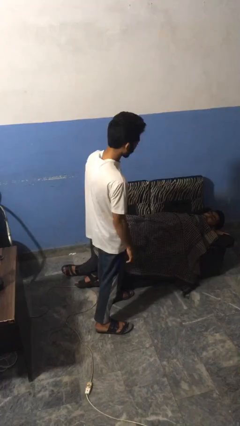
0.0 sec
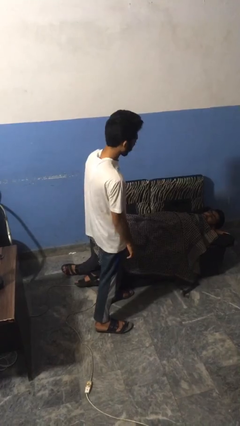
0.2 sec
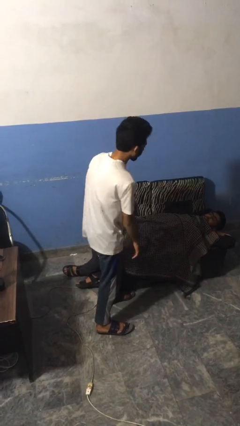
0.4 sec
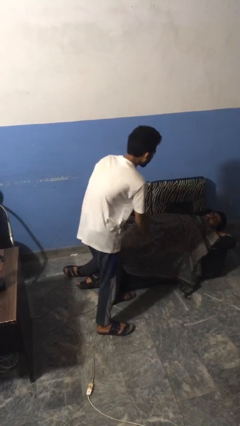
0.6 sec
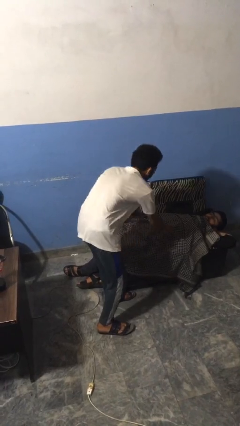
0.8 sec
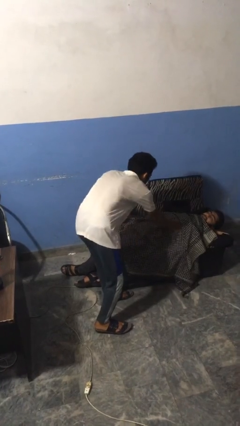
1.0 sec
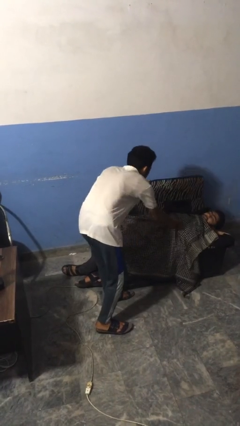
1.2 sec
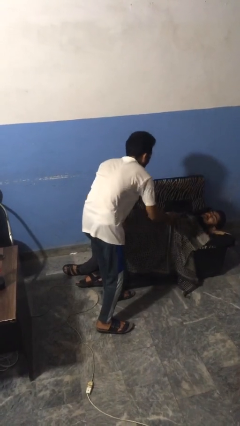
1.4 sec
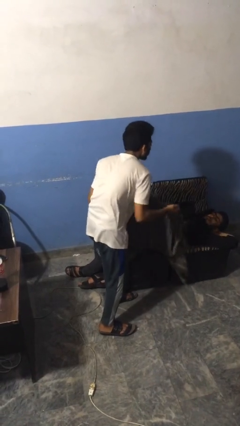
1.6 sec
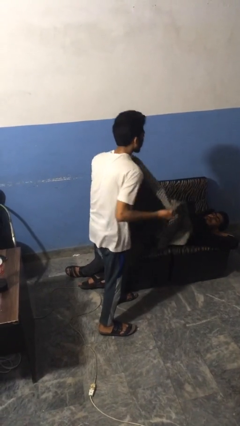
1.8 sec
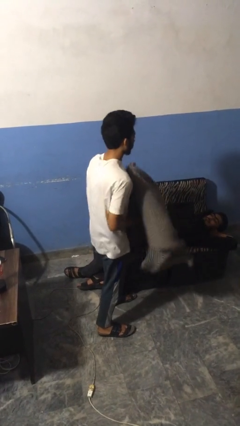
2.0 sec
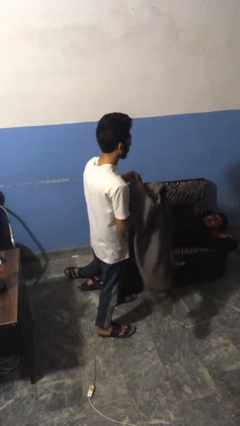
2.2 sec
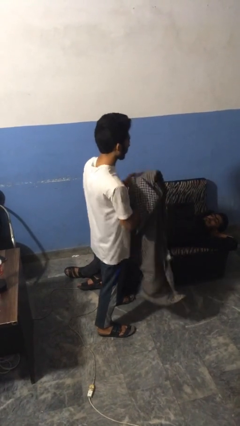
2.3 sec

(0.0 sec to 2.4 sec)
person uncovers friend with blanket

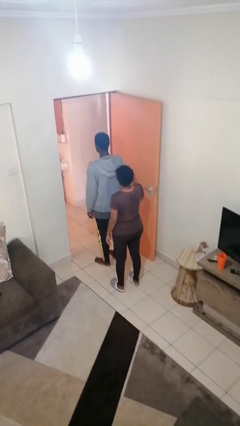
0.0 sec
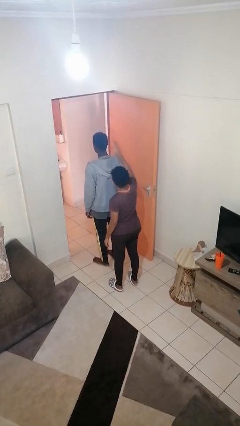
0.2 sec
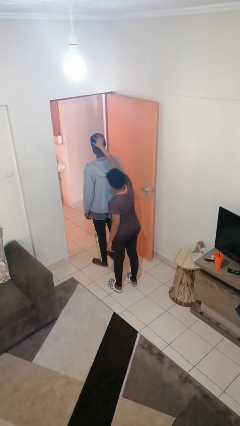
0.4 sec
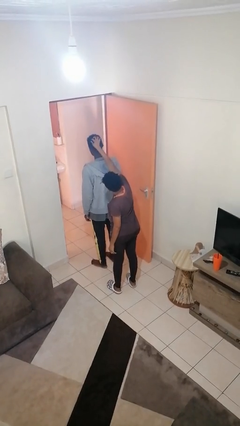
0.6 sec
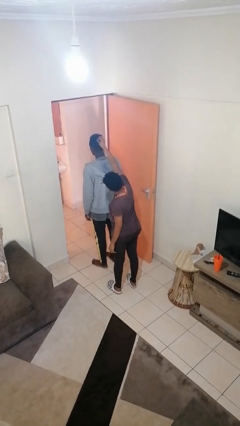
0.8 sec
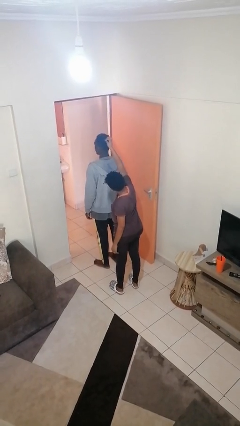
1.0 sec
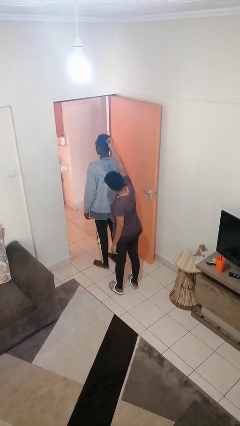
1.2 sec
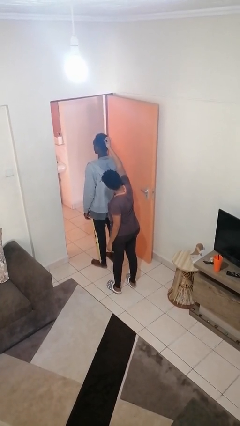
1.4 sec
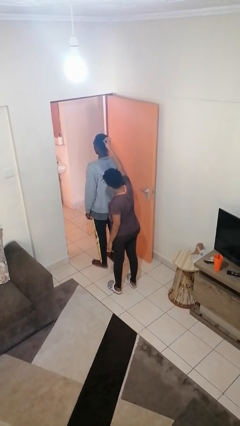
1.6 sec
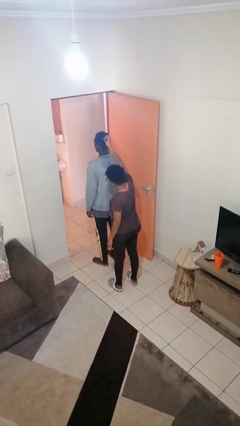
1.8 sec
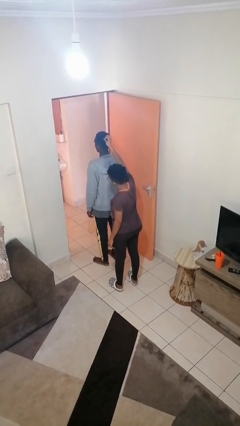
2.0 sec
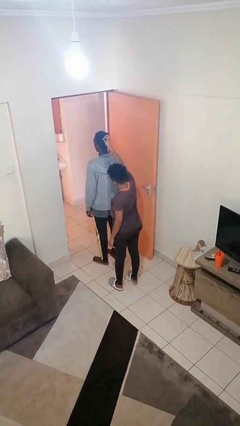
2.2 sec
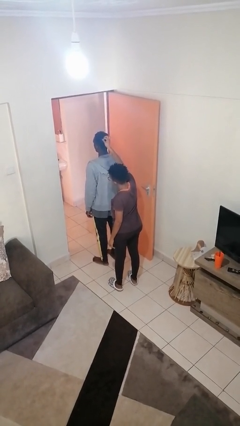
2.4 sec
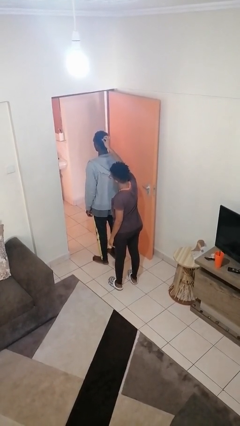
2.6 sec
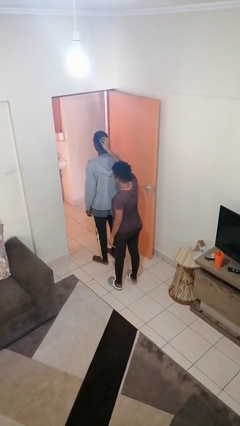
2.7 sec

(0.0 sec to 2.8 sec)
person grabs person by hair

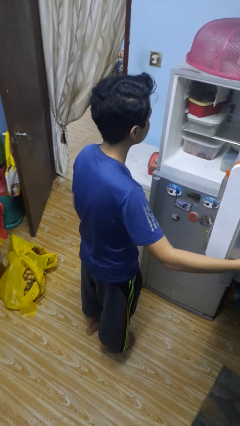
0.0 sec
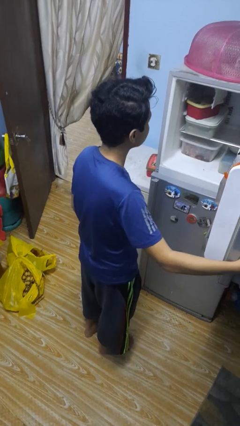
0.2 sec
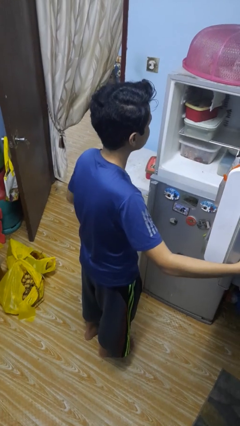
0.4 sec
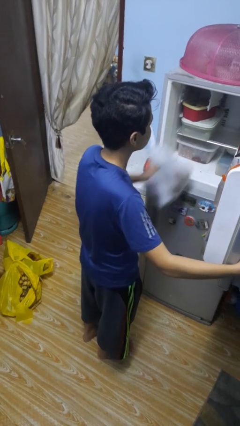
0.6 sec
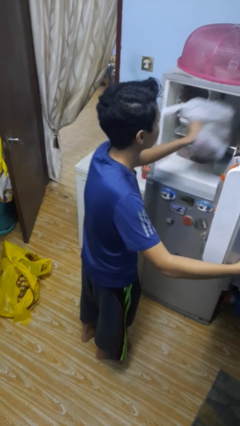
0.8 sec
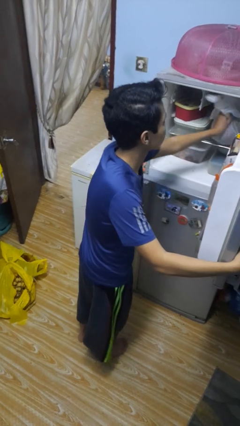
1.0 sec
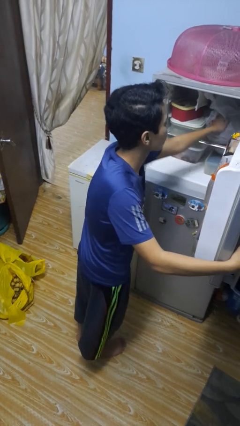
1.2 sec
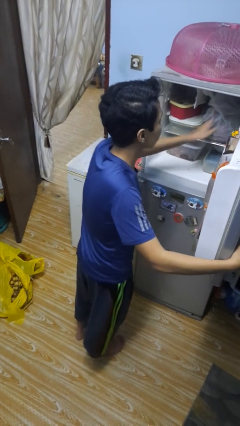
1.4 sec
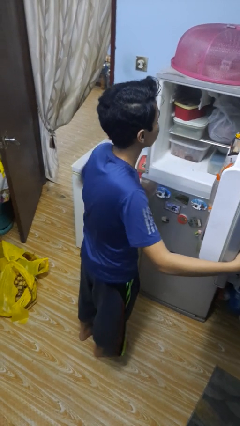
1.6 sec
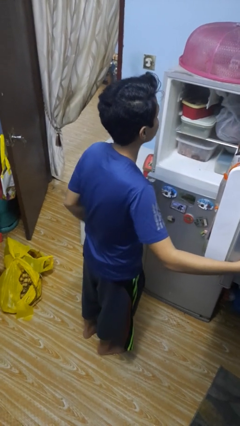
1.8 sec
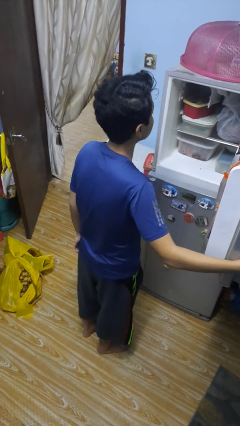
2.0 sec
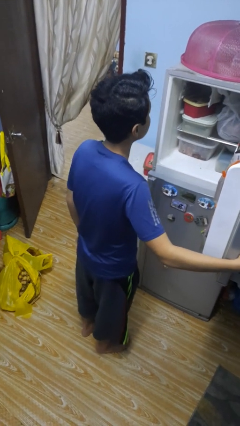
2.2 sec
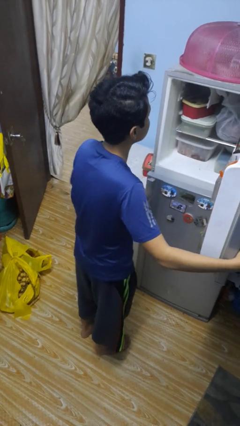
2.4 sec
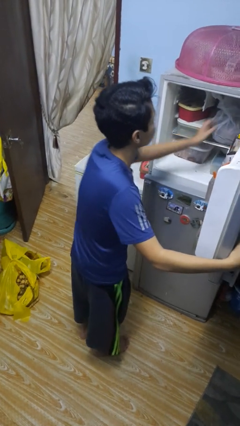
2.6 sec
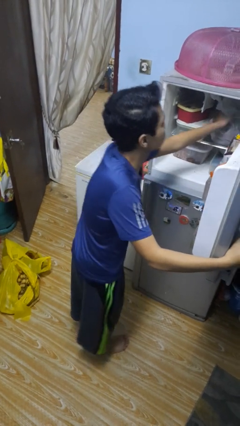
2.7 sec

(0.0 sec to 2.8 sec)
person loads groceries into refrigerator

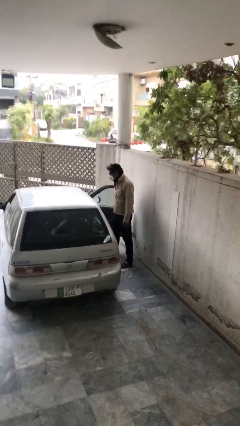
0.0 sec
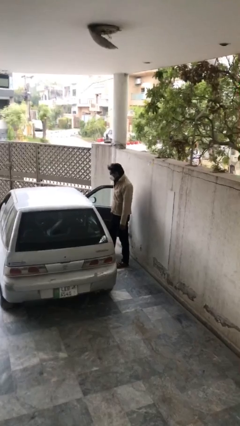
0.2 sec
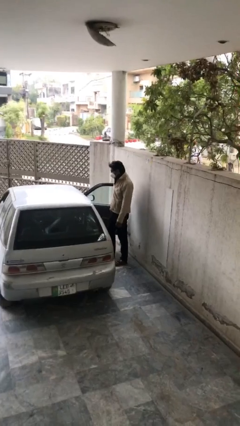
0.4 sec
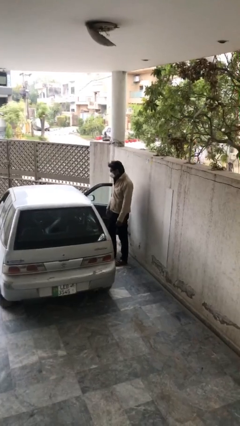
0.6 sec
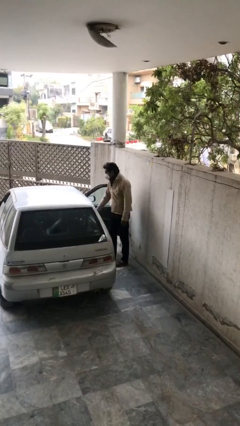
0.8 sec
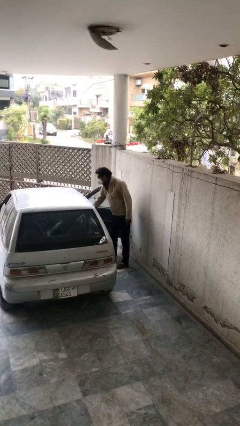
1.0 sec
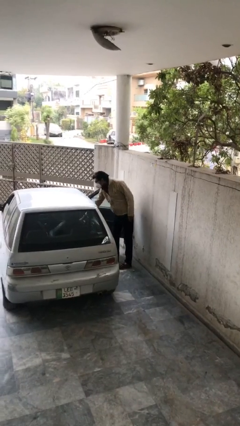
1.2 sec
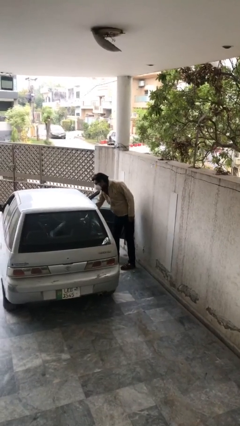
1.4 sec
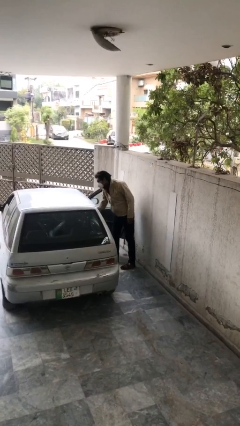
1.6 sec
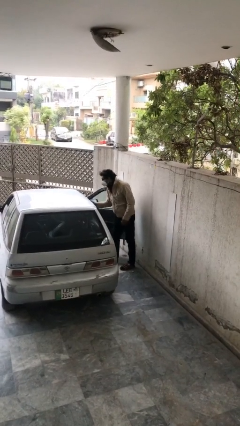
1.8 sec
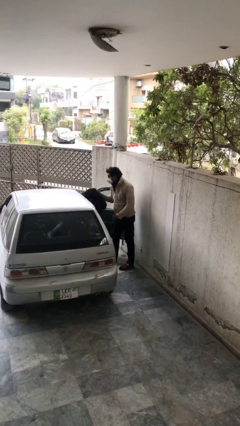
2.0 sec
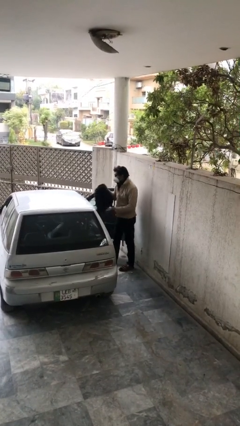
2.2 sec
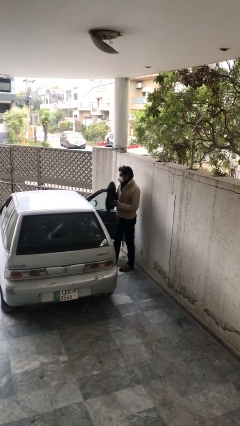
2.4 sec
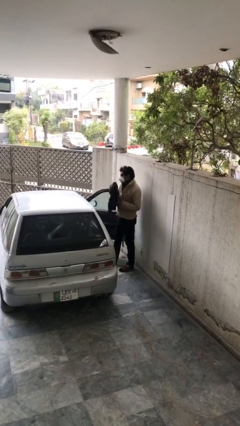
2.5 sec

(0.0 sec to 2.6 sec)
person unloads car

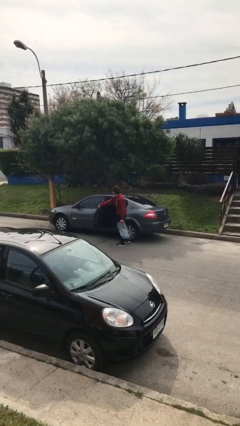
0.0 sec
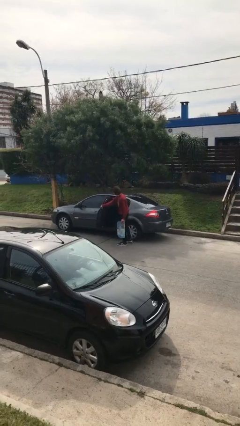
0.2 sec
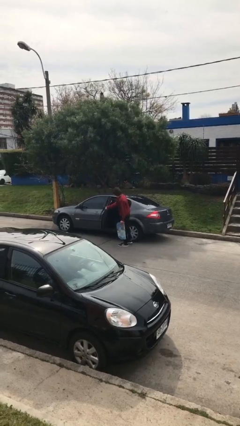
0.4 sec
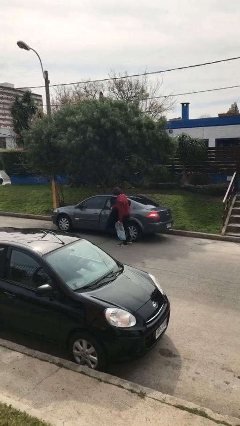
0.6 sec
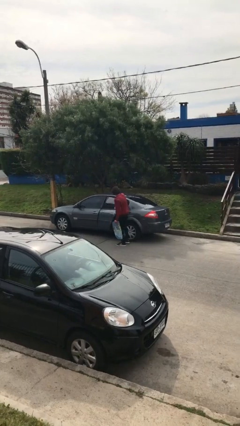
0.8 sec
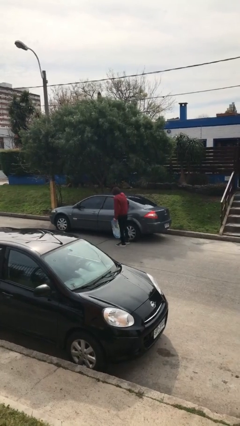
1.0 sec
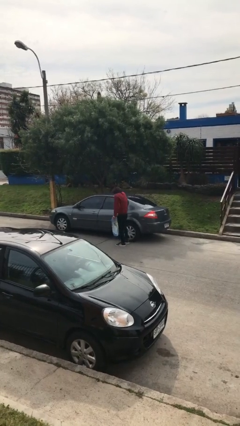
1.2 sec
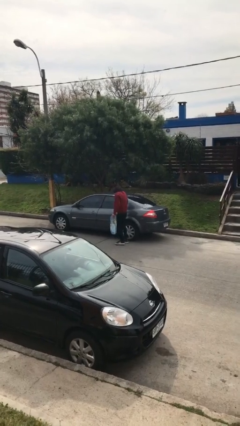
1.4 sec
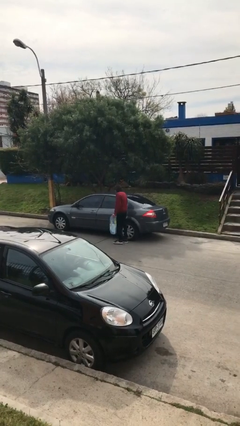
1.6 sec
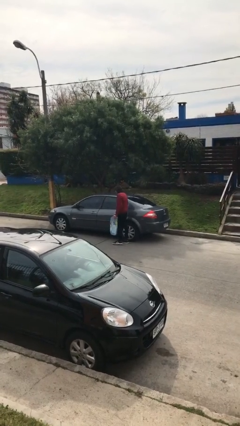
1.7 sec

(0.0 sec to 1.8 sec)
person closes car door

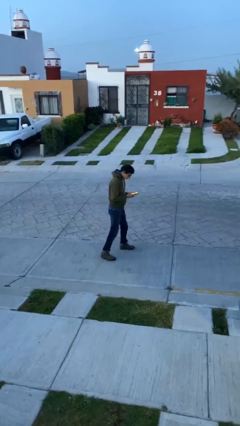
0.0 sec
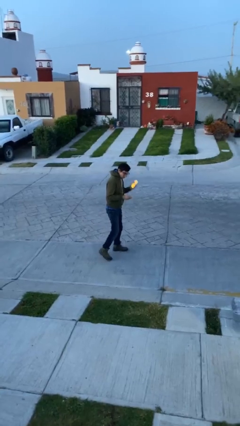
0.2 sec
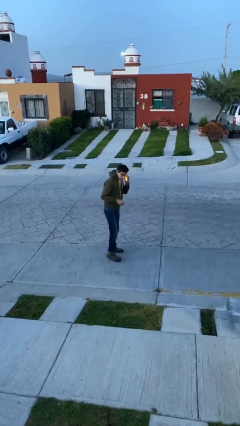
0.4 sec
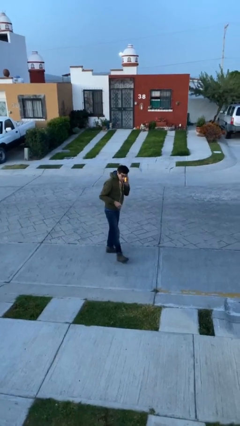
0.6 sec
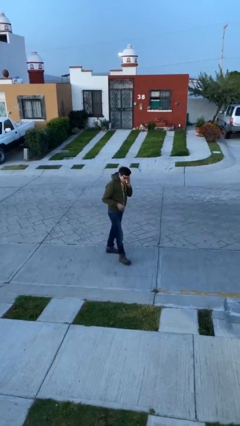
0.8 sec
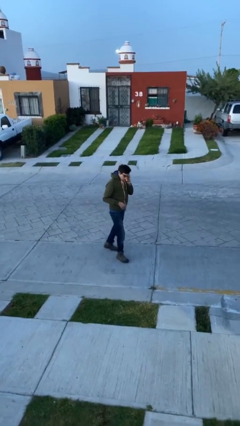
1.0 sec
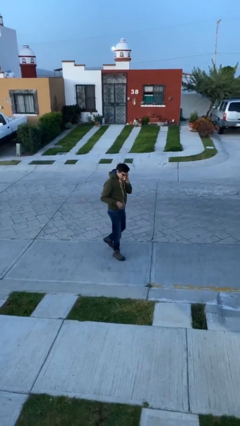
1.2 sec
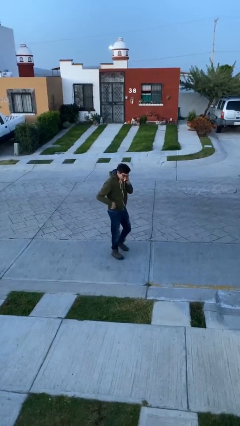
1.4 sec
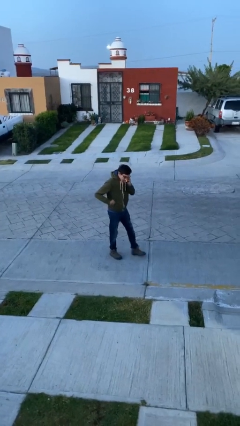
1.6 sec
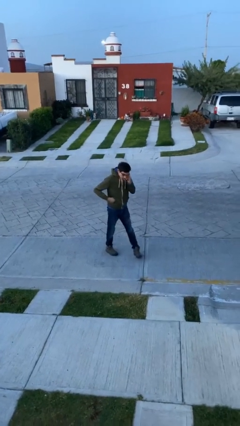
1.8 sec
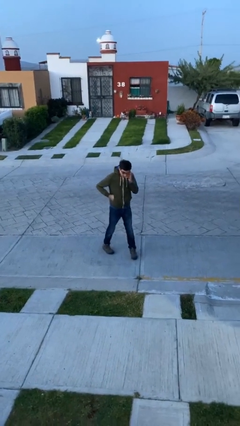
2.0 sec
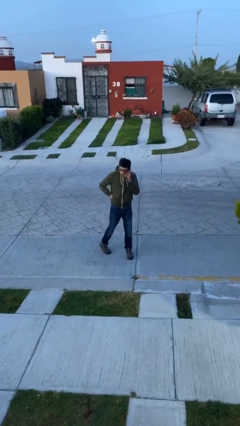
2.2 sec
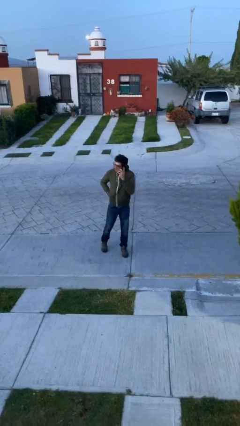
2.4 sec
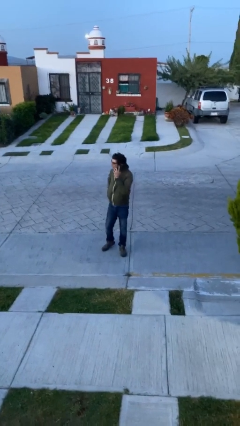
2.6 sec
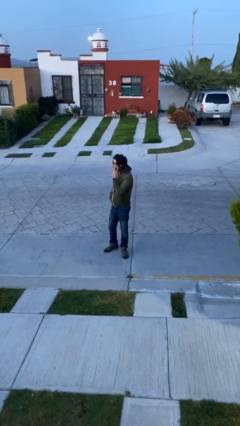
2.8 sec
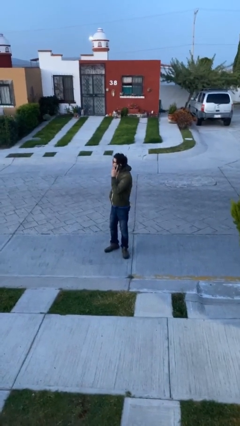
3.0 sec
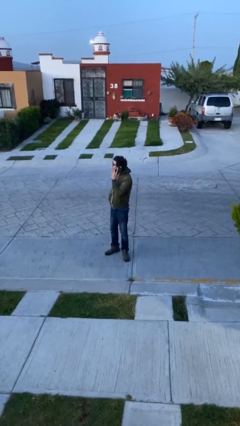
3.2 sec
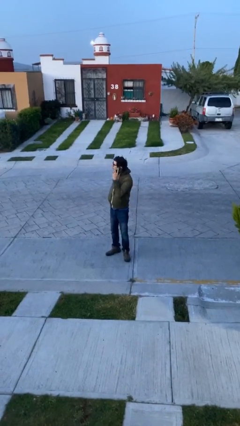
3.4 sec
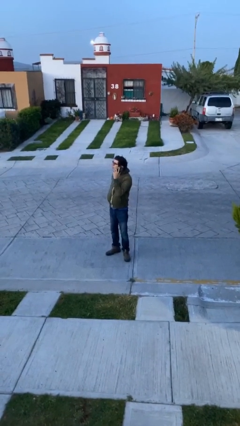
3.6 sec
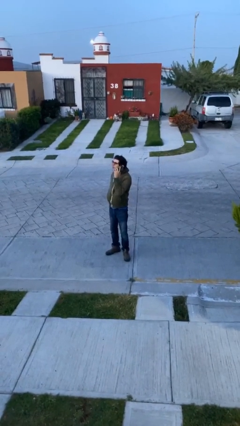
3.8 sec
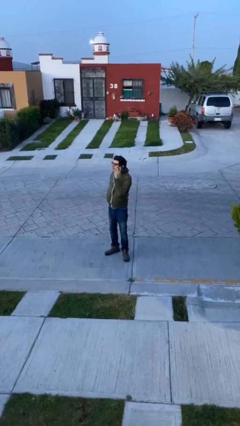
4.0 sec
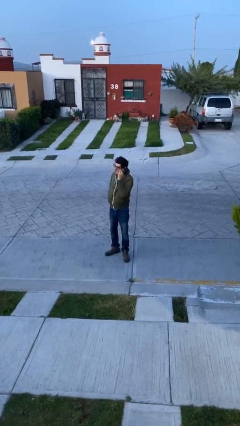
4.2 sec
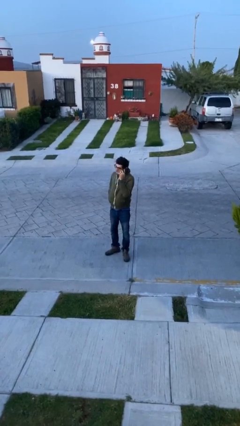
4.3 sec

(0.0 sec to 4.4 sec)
person talks on phone

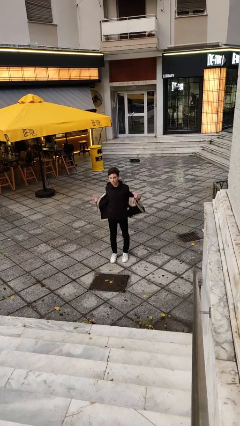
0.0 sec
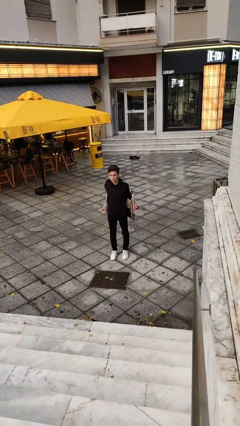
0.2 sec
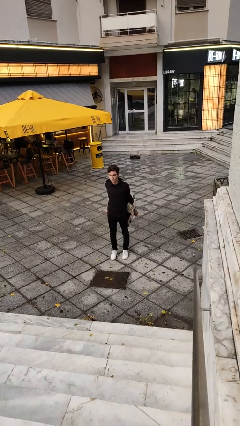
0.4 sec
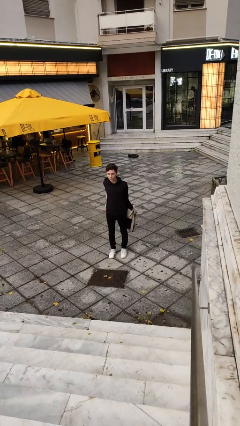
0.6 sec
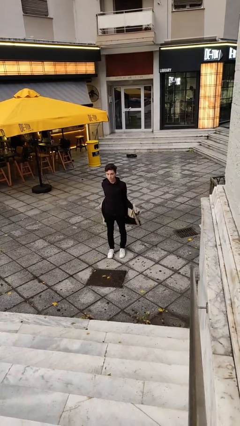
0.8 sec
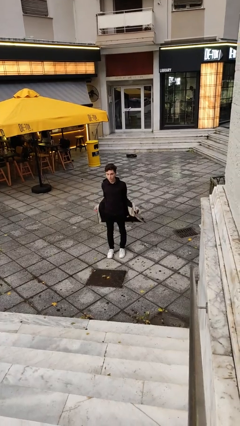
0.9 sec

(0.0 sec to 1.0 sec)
person takes off jacket
